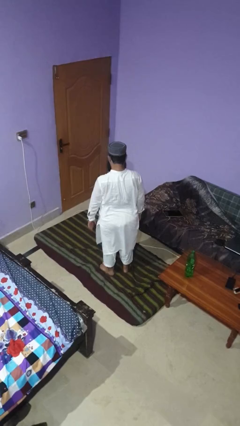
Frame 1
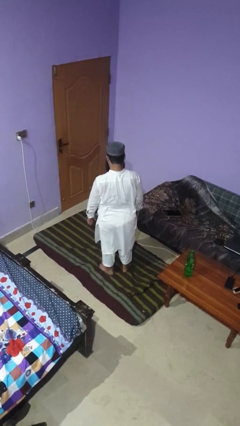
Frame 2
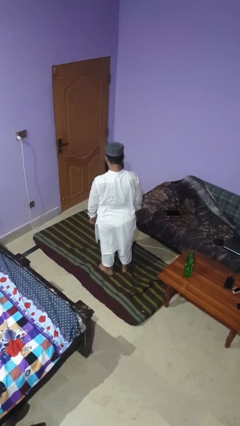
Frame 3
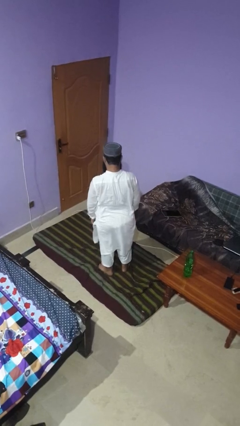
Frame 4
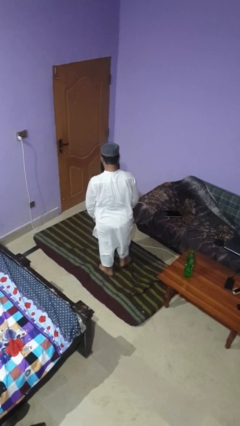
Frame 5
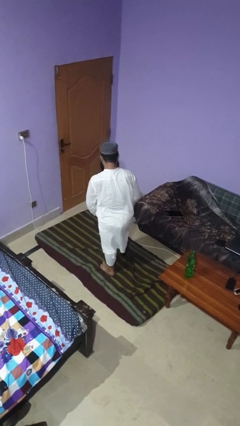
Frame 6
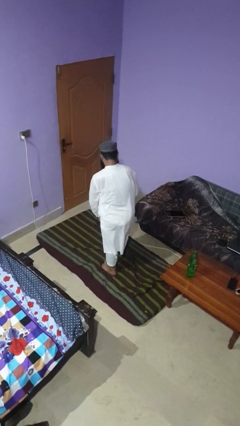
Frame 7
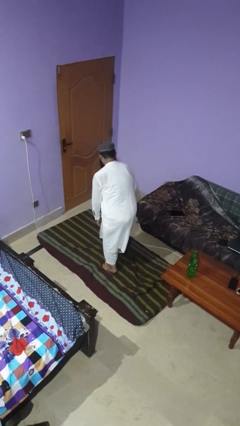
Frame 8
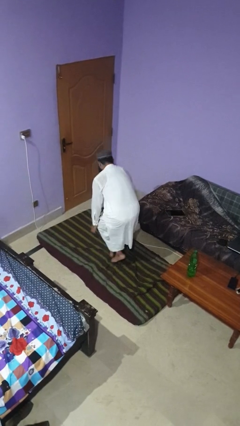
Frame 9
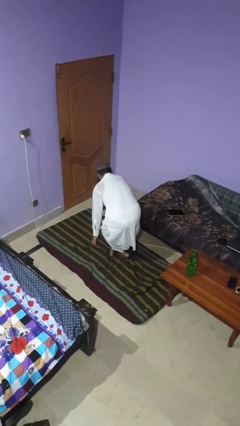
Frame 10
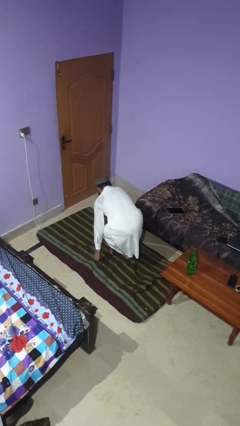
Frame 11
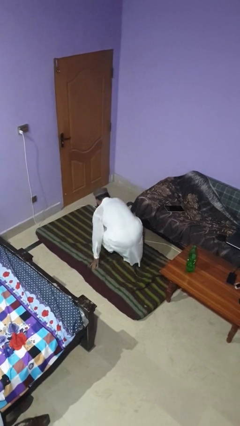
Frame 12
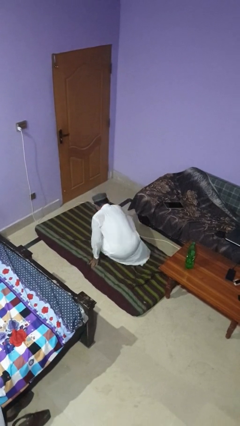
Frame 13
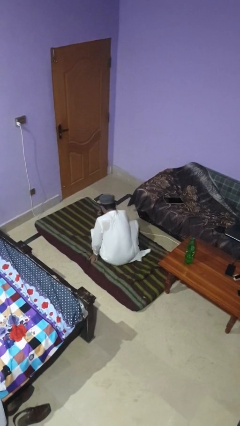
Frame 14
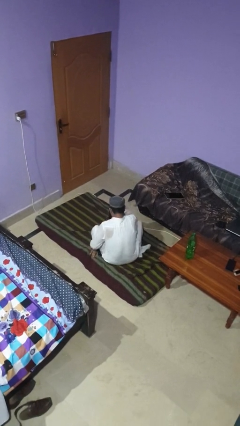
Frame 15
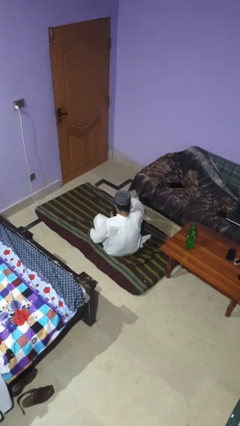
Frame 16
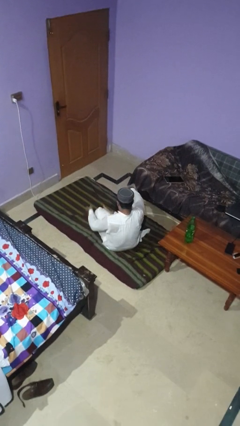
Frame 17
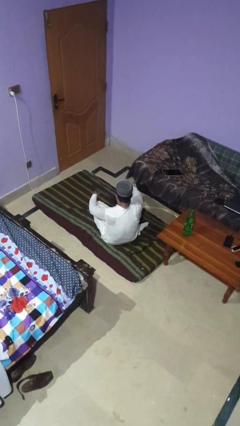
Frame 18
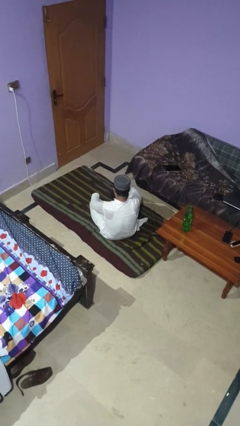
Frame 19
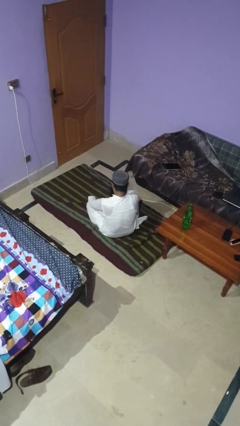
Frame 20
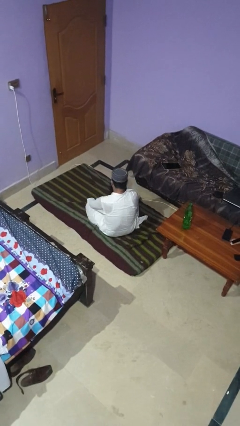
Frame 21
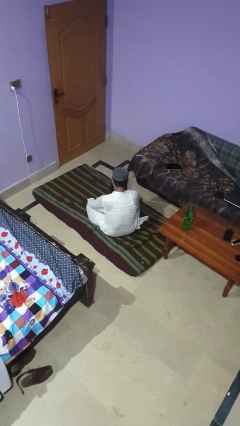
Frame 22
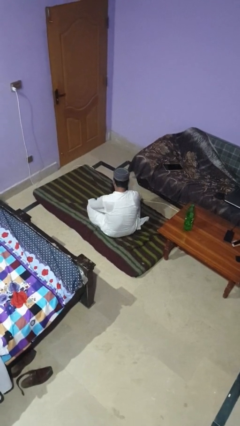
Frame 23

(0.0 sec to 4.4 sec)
person sits crisscross

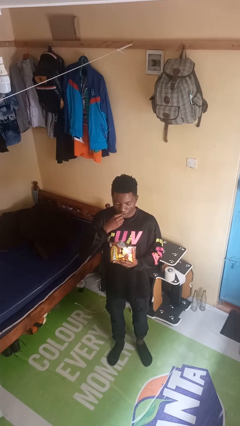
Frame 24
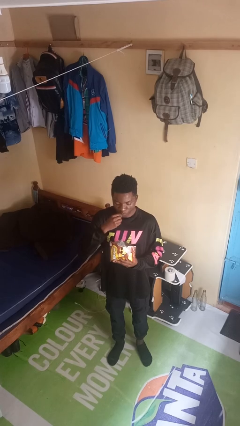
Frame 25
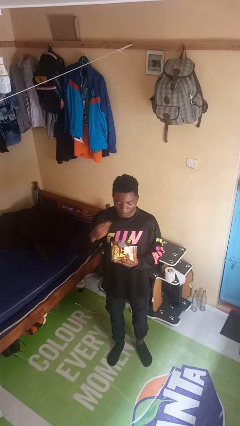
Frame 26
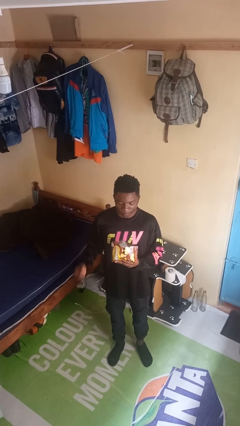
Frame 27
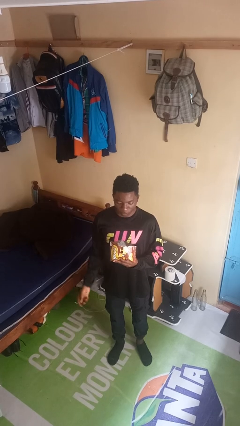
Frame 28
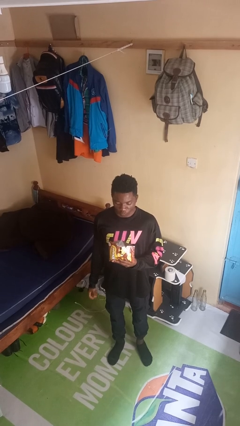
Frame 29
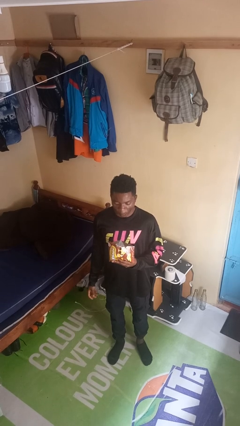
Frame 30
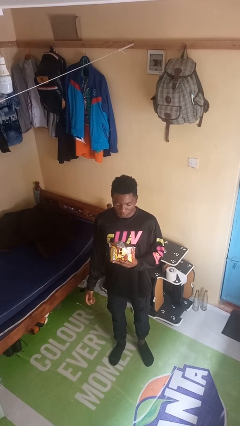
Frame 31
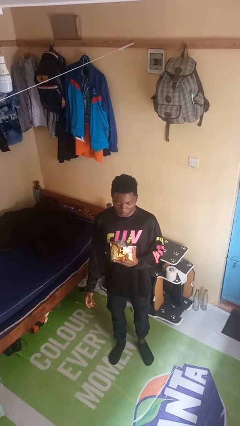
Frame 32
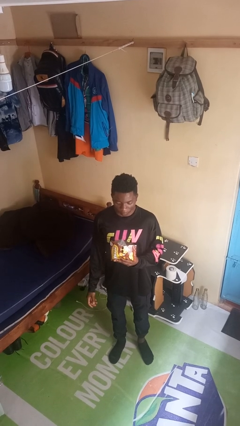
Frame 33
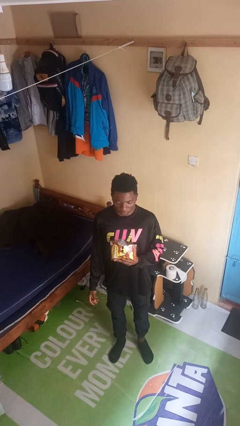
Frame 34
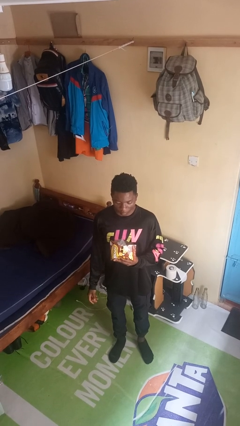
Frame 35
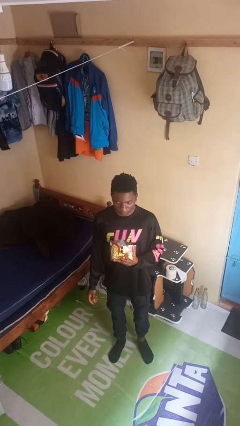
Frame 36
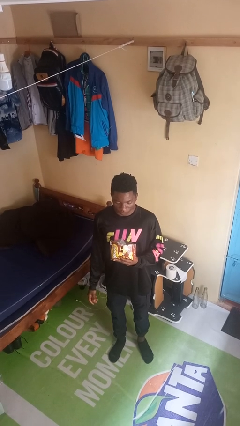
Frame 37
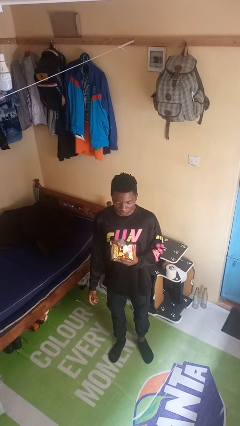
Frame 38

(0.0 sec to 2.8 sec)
person eats snack from bag

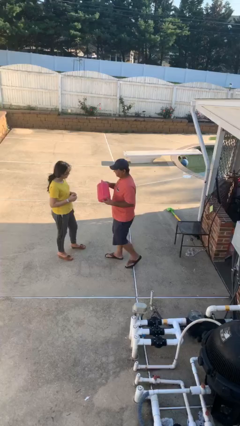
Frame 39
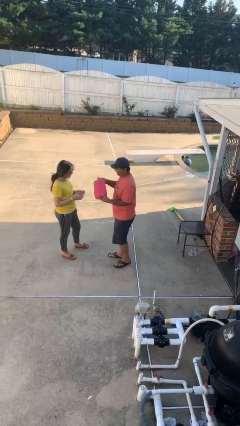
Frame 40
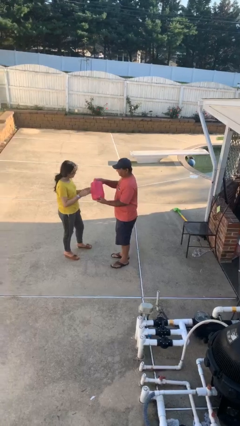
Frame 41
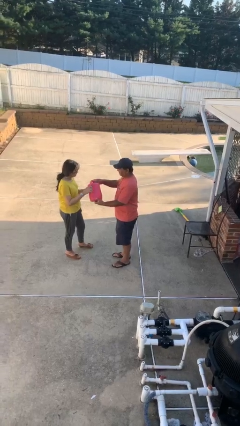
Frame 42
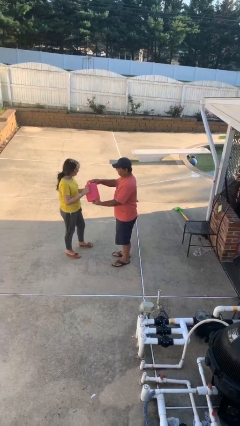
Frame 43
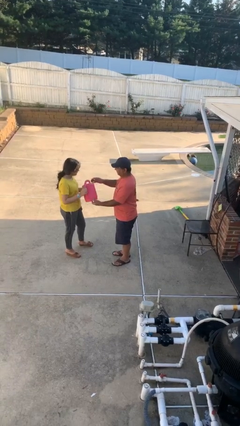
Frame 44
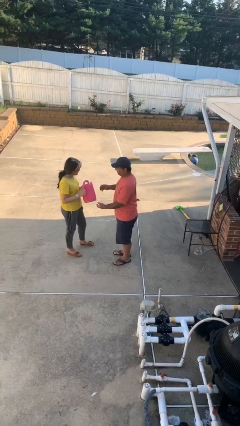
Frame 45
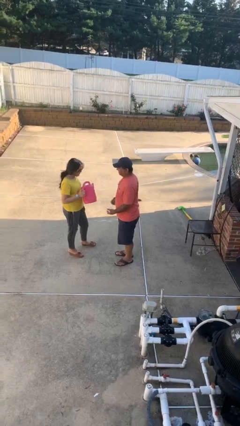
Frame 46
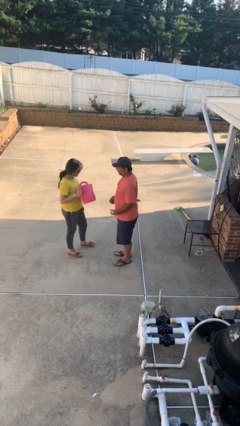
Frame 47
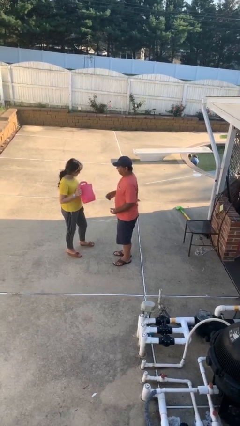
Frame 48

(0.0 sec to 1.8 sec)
person transfers object to person

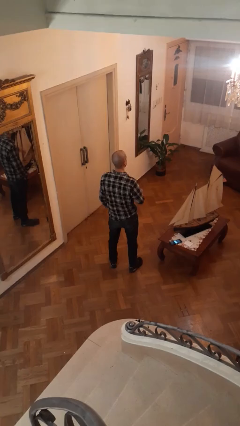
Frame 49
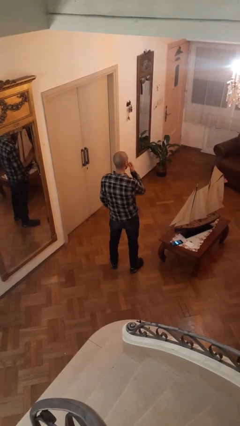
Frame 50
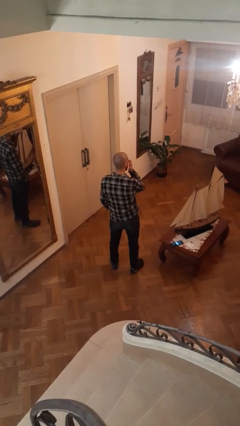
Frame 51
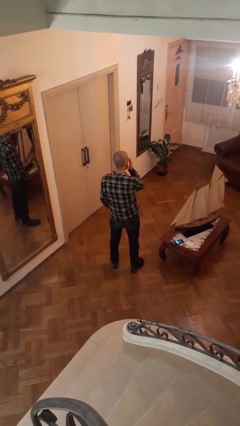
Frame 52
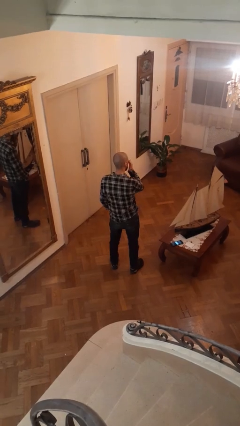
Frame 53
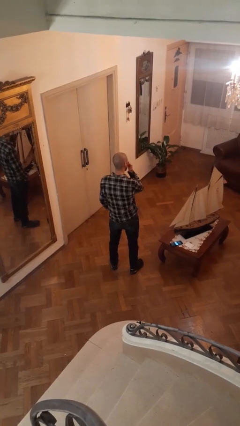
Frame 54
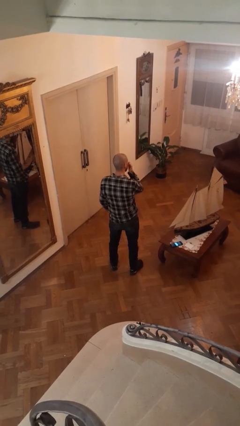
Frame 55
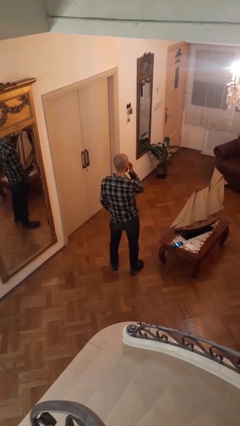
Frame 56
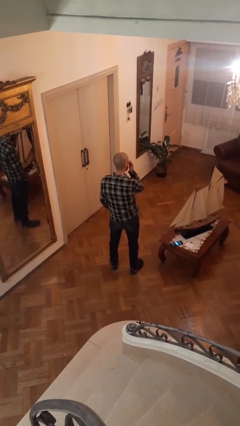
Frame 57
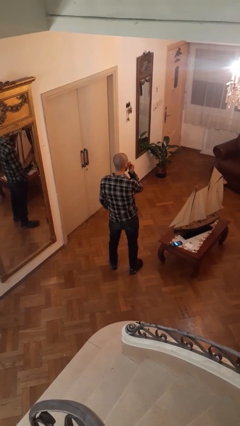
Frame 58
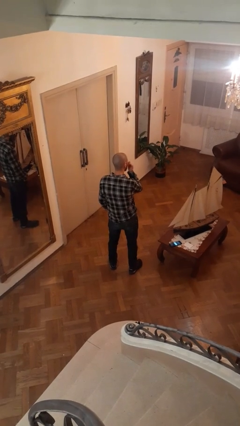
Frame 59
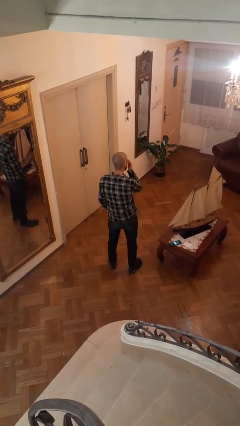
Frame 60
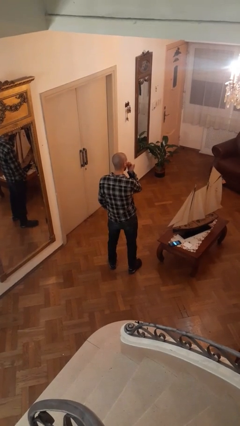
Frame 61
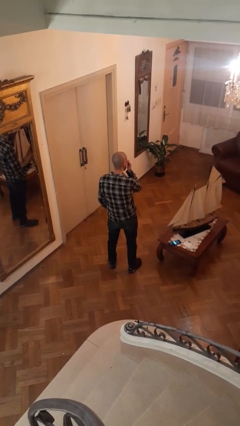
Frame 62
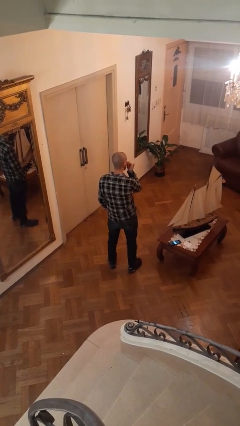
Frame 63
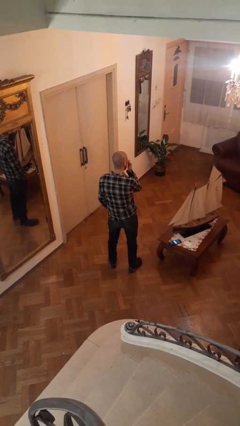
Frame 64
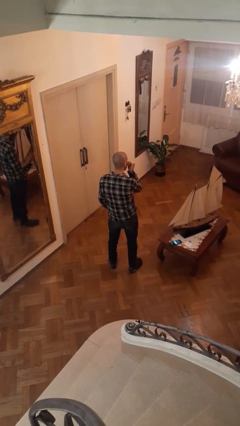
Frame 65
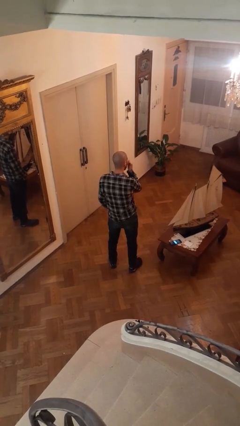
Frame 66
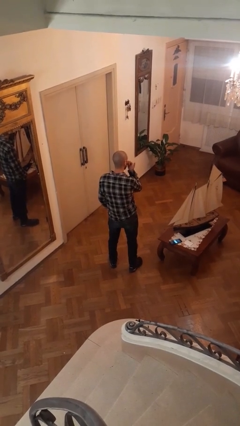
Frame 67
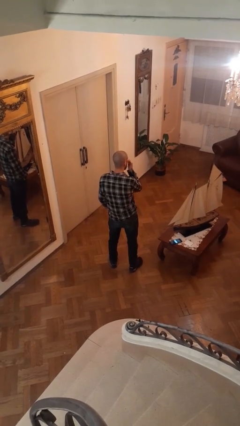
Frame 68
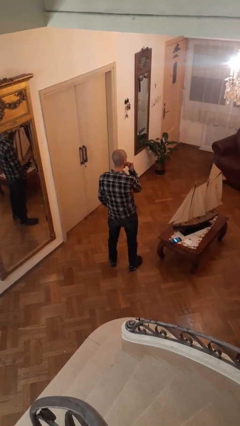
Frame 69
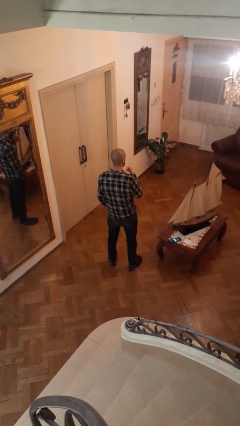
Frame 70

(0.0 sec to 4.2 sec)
person scratches face

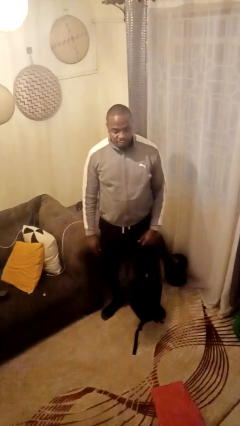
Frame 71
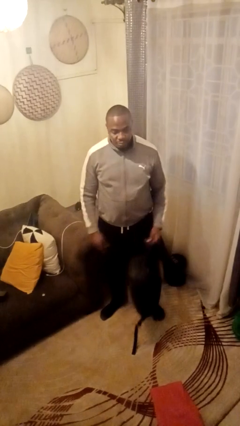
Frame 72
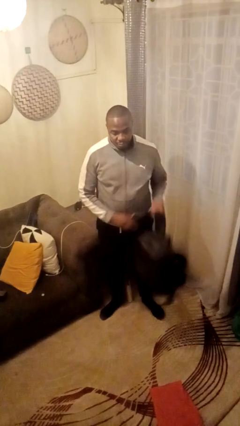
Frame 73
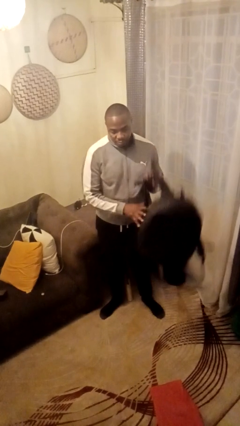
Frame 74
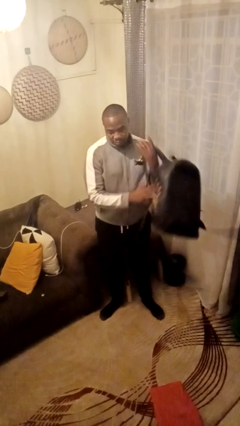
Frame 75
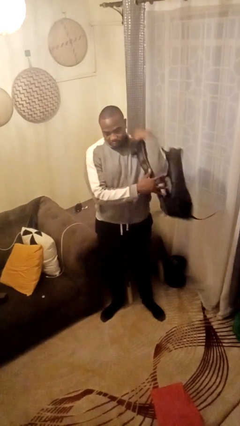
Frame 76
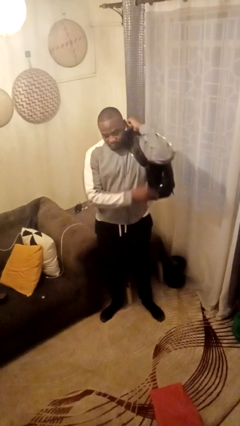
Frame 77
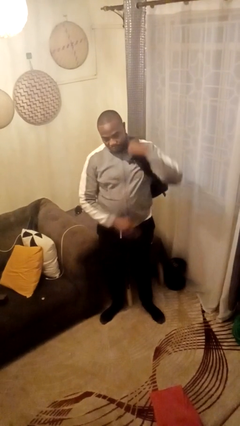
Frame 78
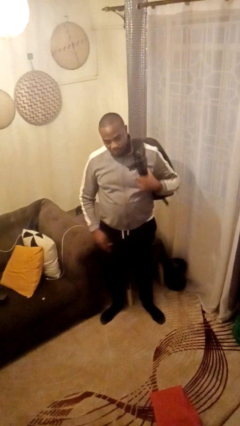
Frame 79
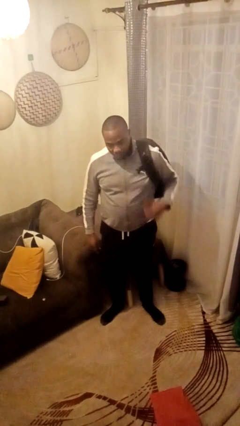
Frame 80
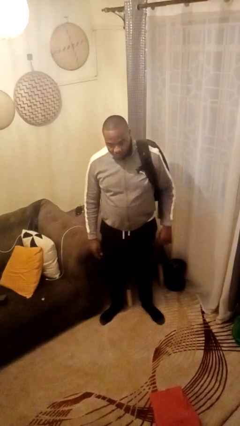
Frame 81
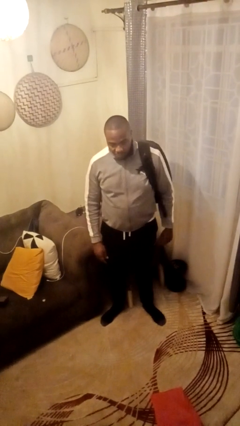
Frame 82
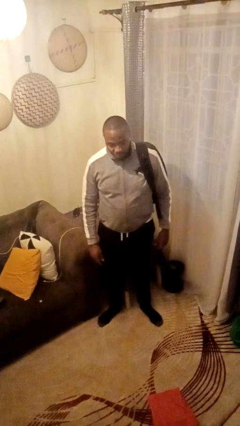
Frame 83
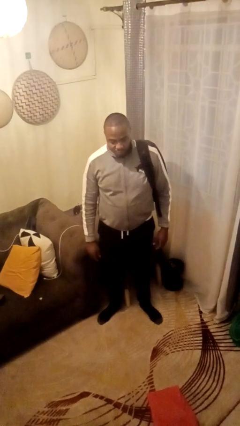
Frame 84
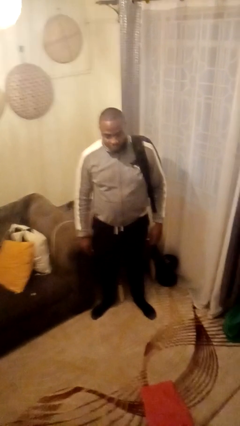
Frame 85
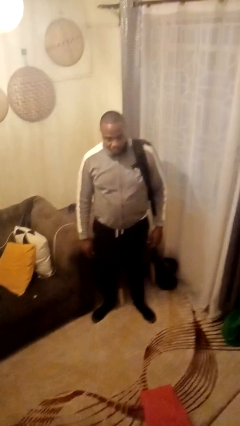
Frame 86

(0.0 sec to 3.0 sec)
person puts on backpack

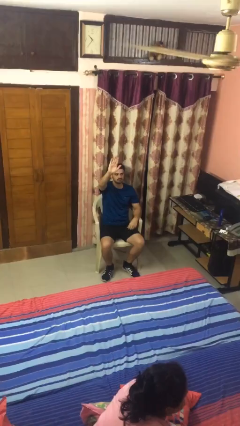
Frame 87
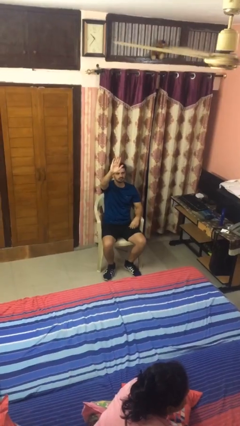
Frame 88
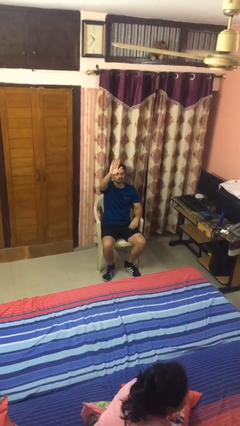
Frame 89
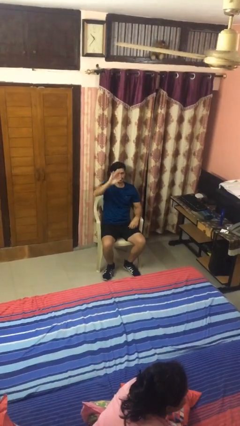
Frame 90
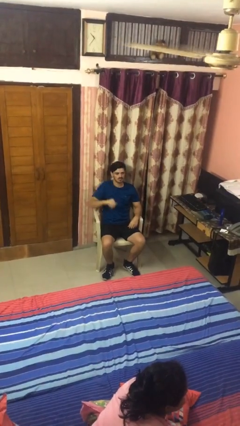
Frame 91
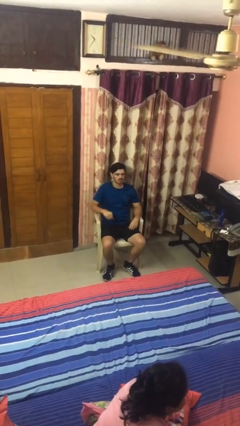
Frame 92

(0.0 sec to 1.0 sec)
person gestures lower hand

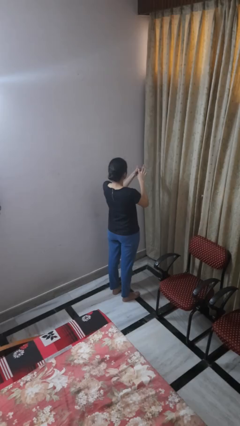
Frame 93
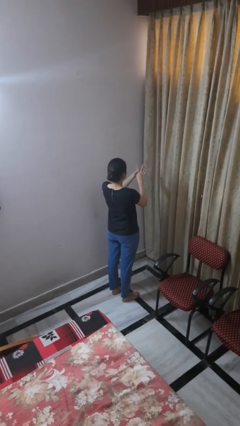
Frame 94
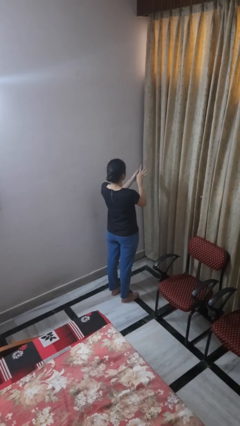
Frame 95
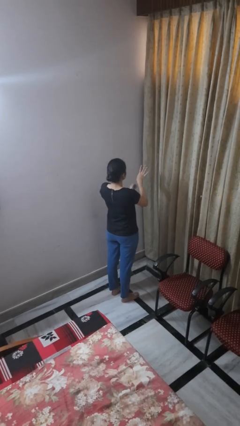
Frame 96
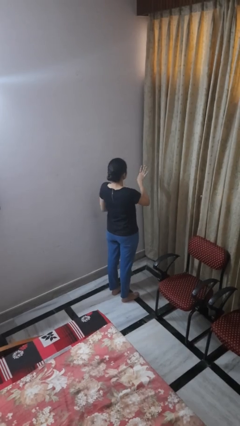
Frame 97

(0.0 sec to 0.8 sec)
person puts on ring
